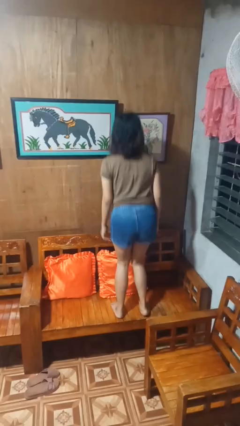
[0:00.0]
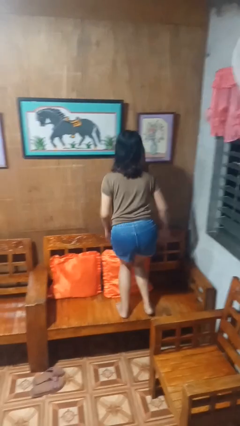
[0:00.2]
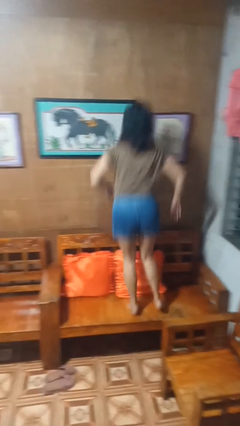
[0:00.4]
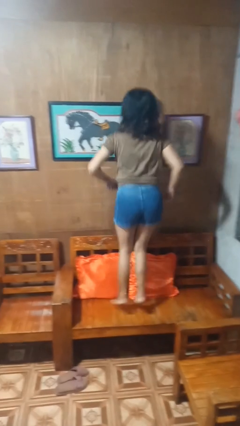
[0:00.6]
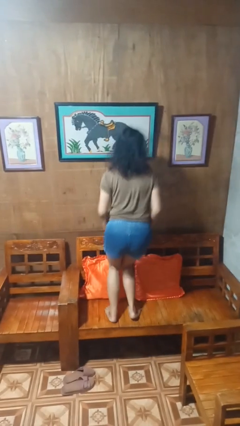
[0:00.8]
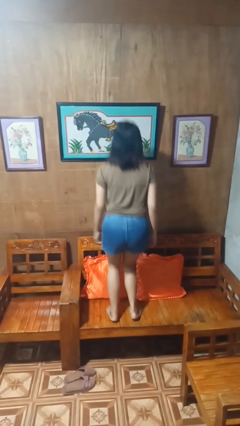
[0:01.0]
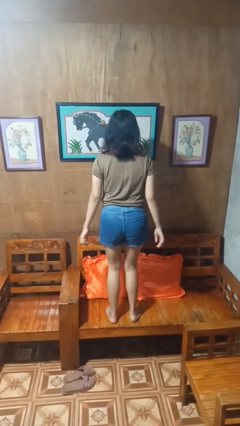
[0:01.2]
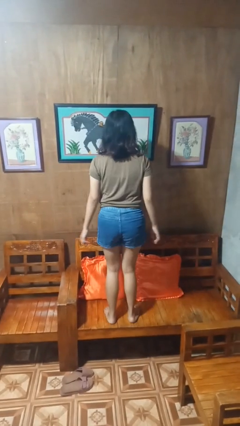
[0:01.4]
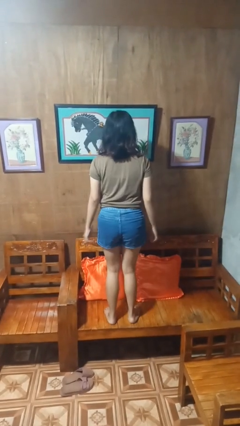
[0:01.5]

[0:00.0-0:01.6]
person jumps on couch

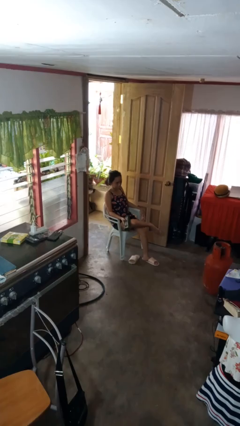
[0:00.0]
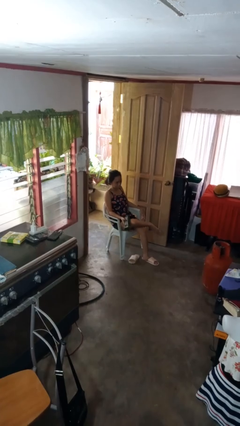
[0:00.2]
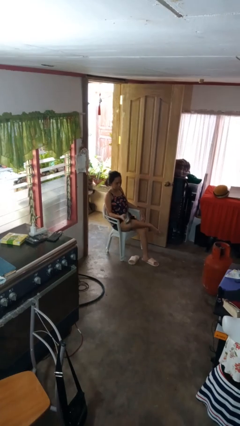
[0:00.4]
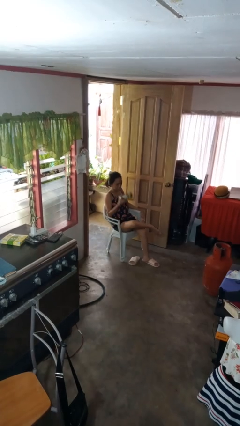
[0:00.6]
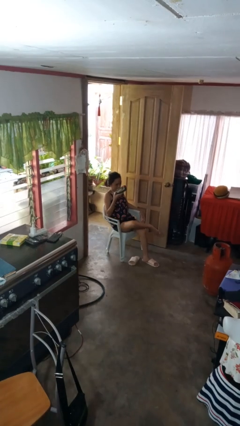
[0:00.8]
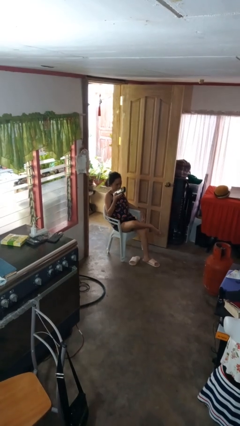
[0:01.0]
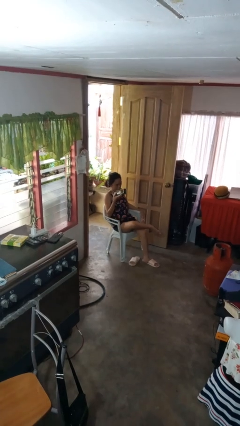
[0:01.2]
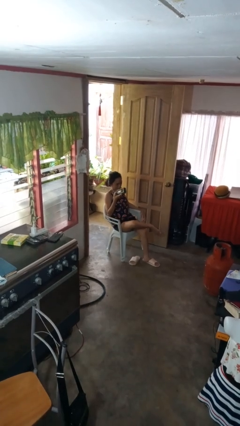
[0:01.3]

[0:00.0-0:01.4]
person uses television remote

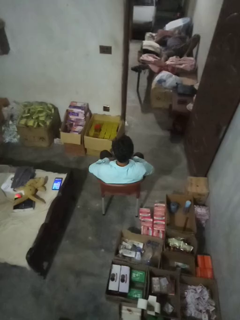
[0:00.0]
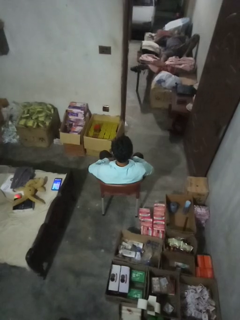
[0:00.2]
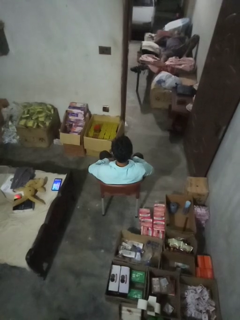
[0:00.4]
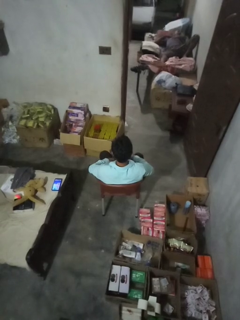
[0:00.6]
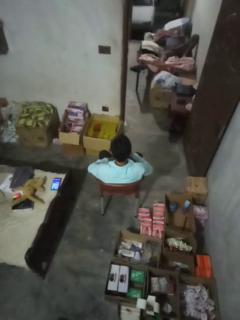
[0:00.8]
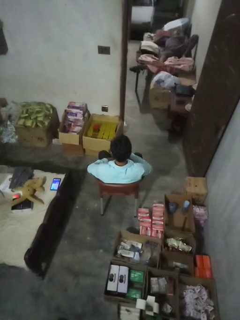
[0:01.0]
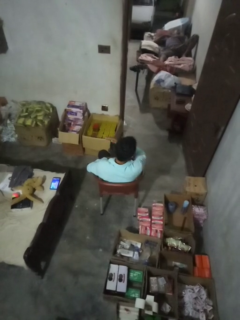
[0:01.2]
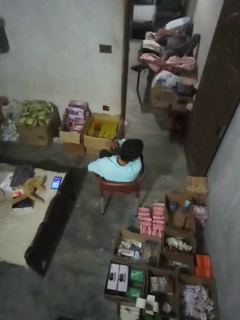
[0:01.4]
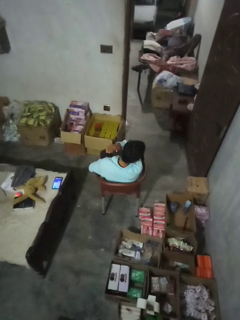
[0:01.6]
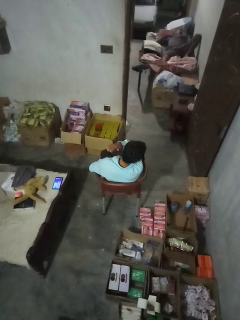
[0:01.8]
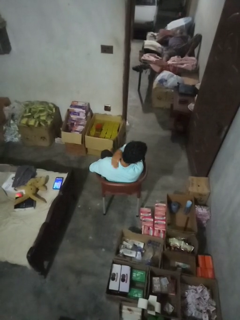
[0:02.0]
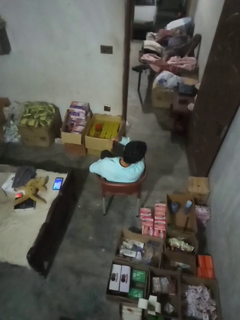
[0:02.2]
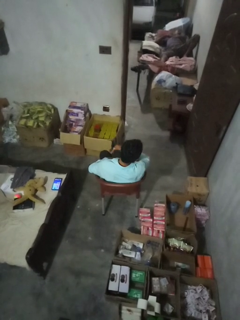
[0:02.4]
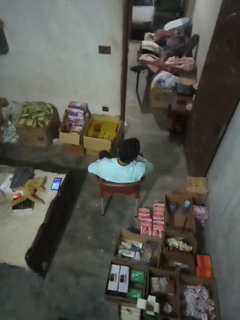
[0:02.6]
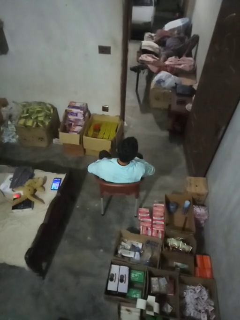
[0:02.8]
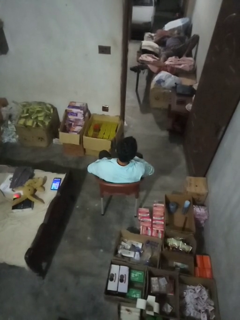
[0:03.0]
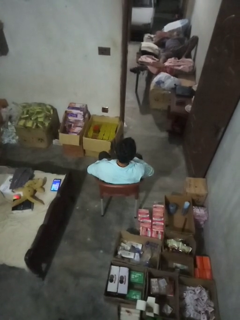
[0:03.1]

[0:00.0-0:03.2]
person swats bug

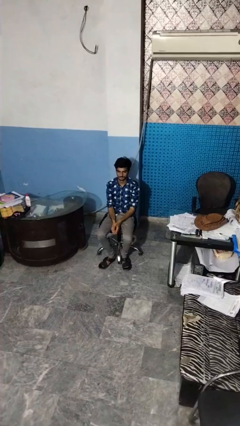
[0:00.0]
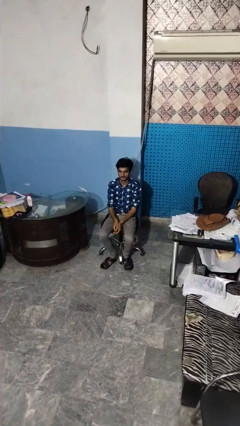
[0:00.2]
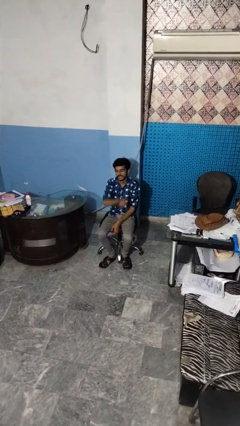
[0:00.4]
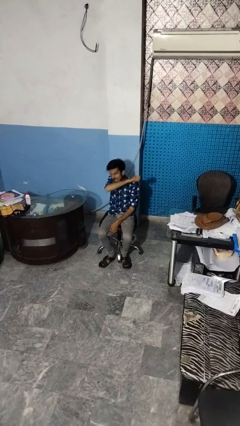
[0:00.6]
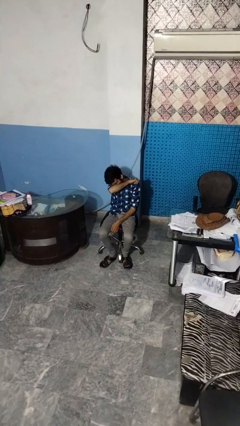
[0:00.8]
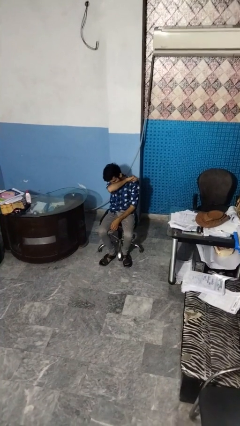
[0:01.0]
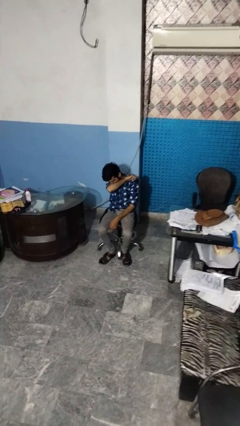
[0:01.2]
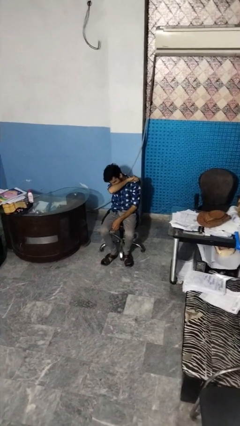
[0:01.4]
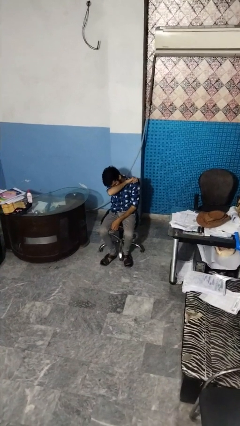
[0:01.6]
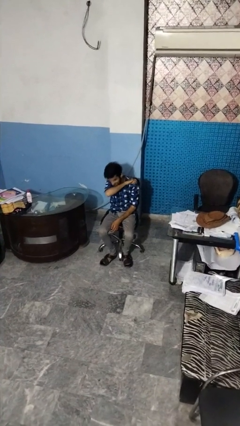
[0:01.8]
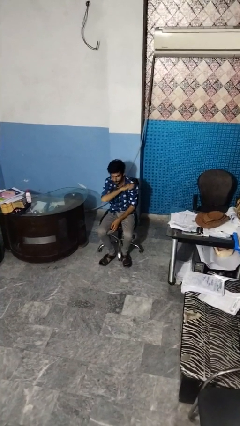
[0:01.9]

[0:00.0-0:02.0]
person sneezes into arm

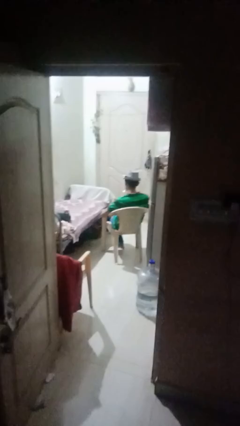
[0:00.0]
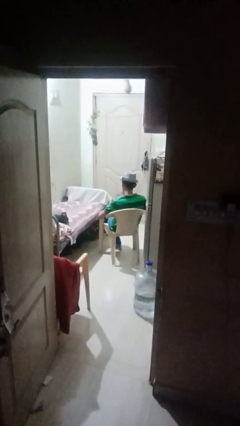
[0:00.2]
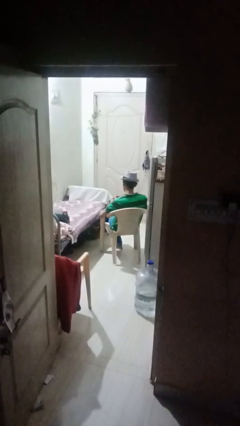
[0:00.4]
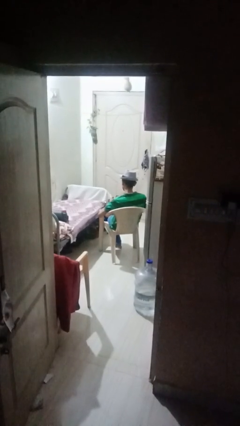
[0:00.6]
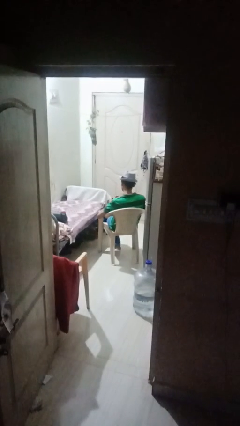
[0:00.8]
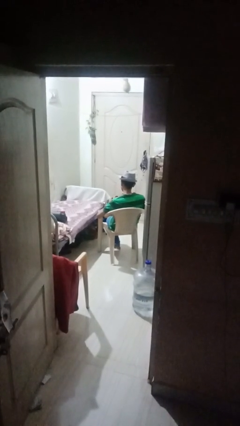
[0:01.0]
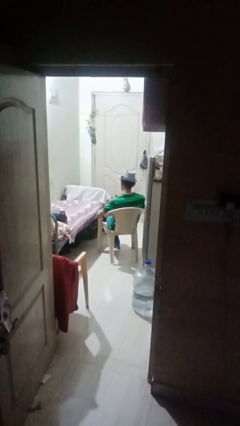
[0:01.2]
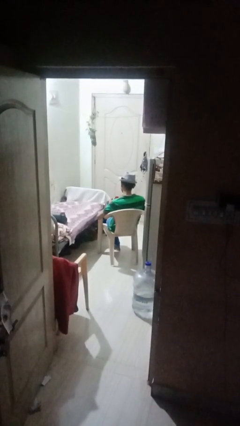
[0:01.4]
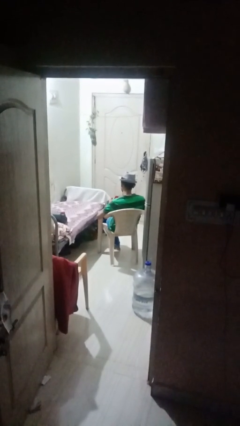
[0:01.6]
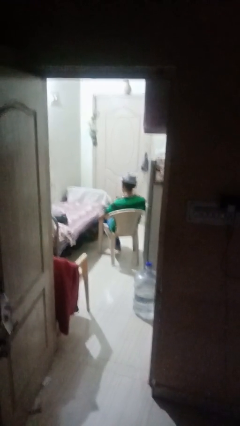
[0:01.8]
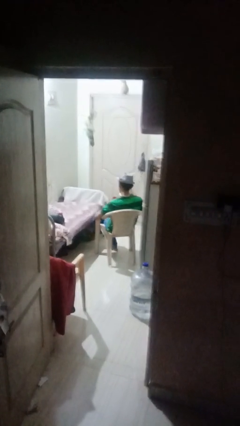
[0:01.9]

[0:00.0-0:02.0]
person stirs mug

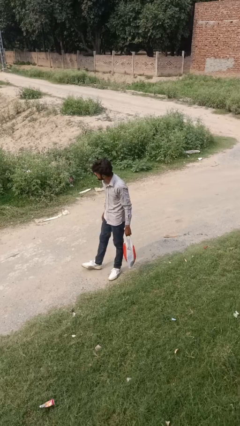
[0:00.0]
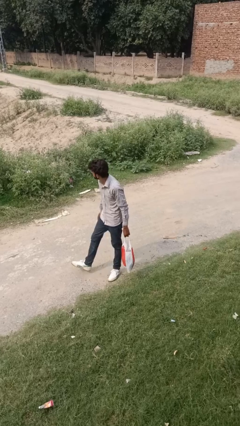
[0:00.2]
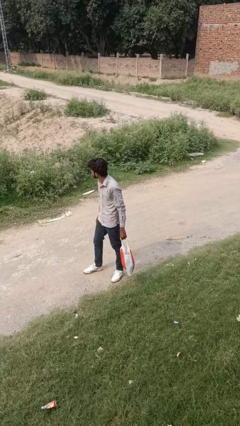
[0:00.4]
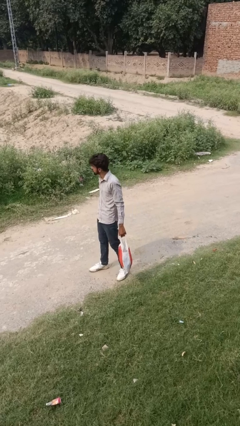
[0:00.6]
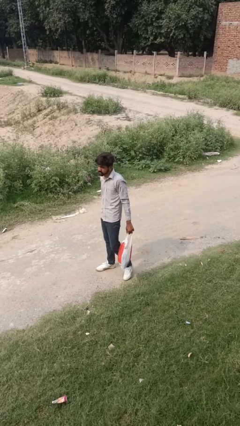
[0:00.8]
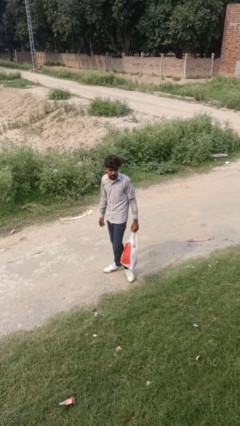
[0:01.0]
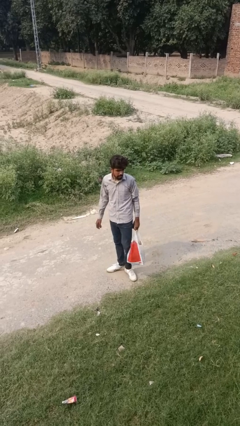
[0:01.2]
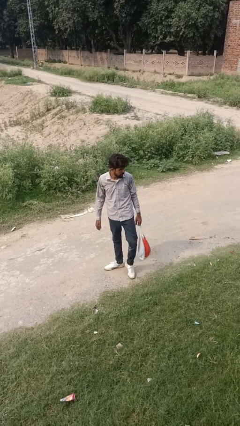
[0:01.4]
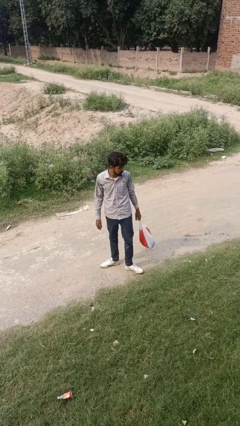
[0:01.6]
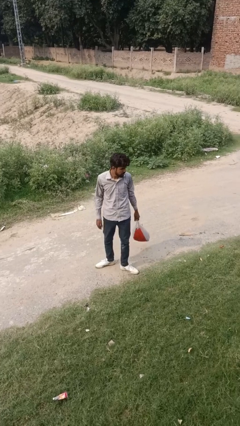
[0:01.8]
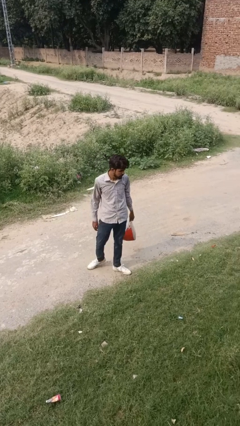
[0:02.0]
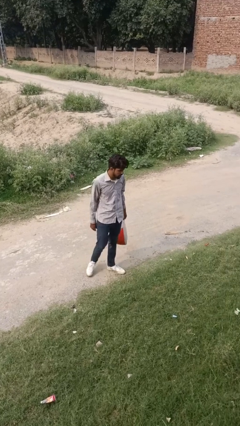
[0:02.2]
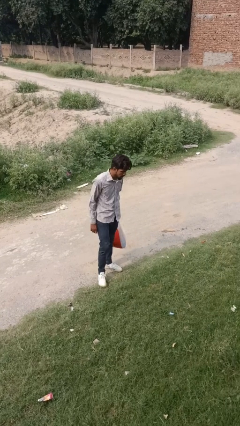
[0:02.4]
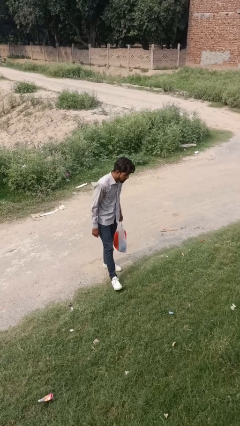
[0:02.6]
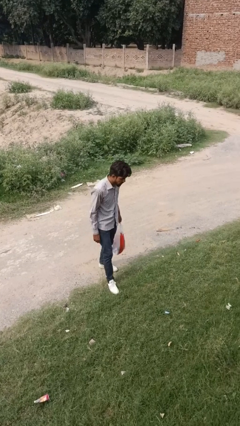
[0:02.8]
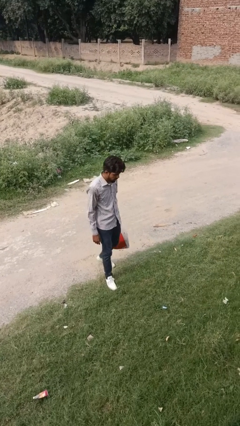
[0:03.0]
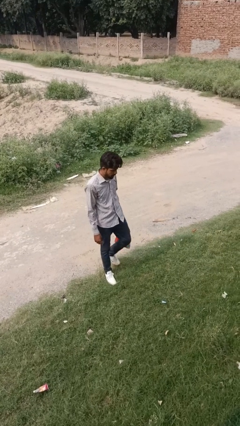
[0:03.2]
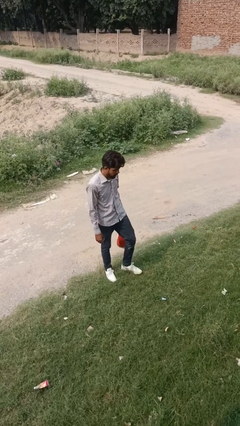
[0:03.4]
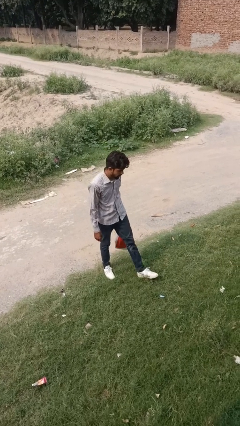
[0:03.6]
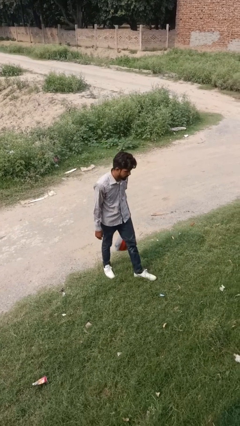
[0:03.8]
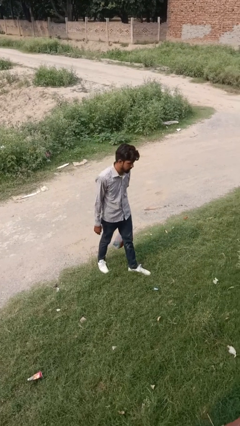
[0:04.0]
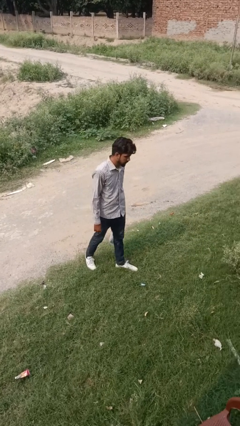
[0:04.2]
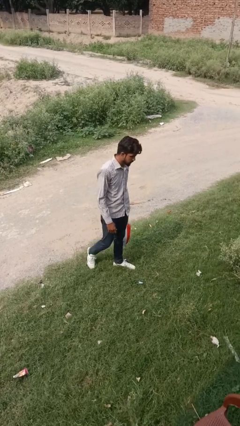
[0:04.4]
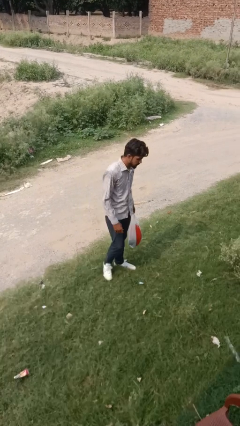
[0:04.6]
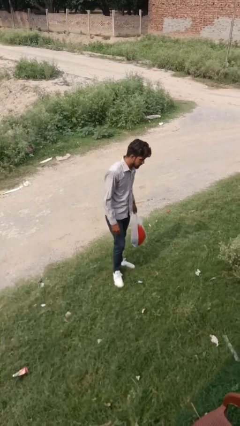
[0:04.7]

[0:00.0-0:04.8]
person carries groceries

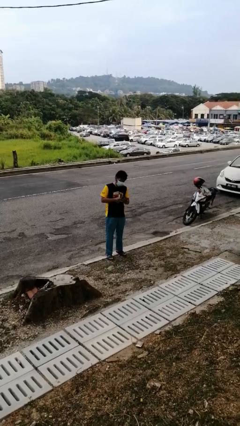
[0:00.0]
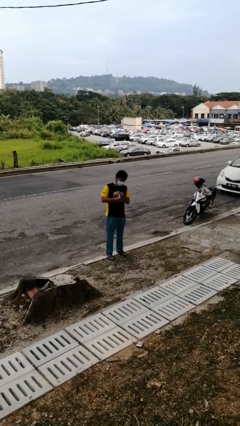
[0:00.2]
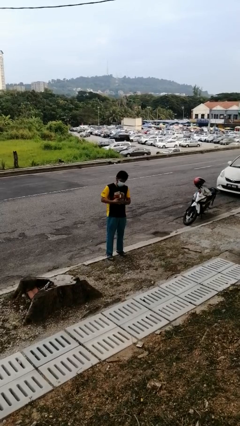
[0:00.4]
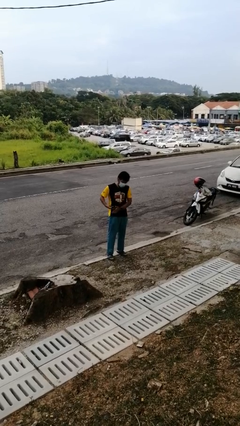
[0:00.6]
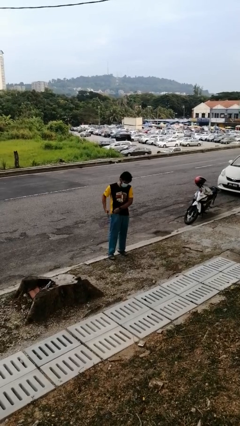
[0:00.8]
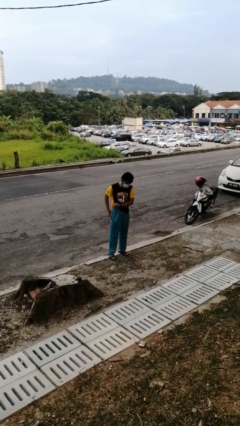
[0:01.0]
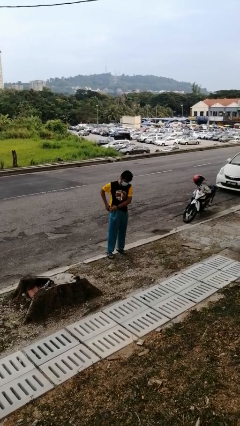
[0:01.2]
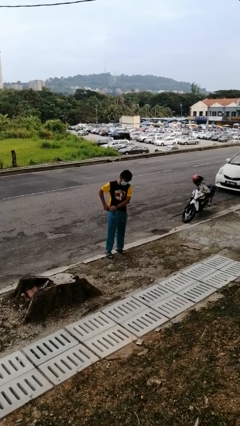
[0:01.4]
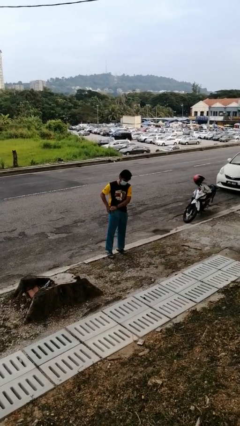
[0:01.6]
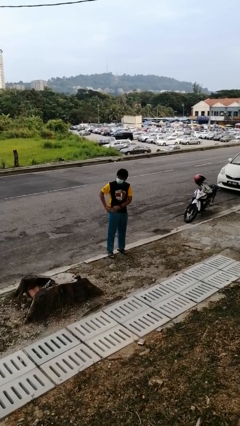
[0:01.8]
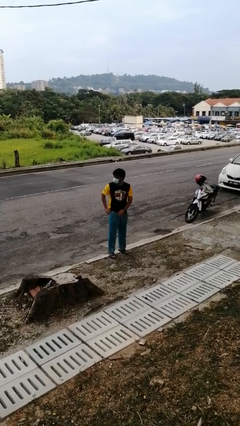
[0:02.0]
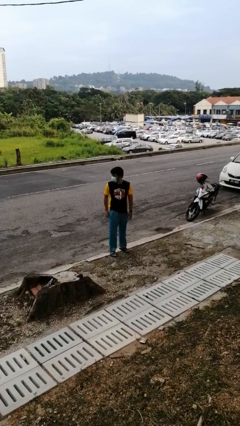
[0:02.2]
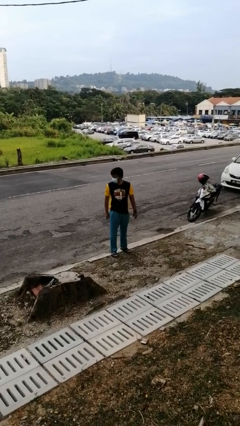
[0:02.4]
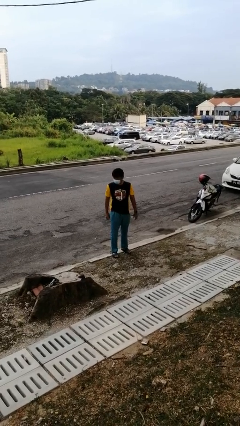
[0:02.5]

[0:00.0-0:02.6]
person puts phone into pocket

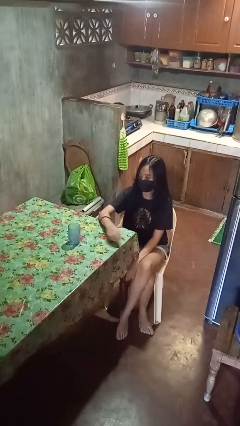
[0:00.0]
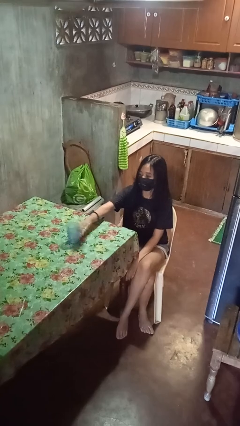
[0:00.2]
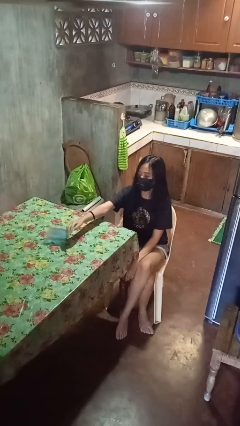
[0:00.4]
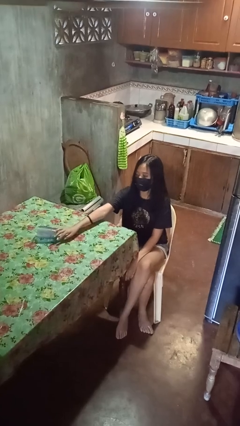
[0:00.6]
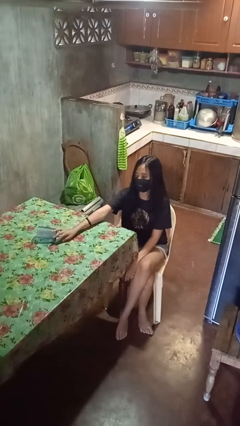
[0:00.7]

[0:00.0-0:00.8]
person knocks over glass
